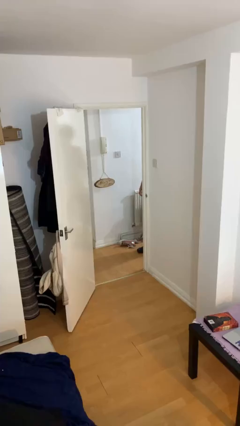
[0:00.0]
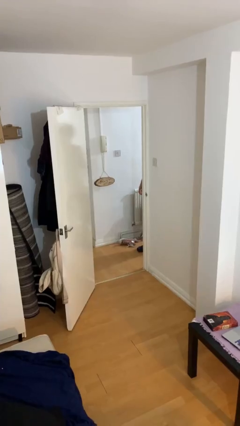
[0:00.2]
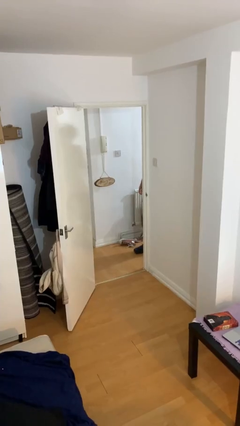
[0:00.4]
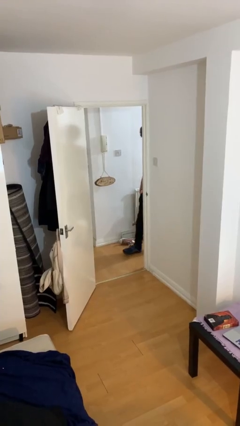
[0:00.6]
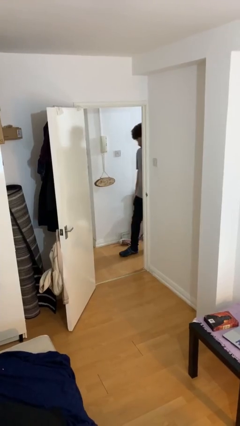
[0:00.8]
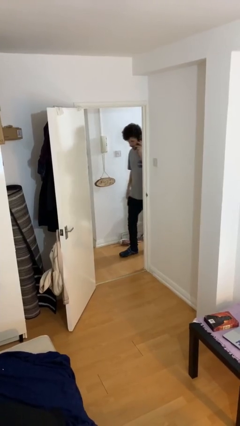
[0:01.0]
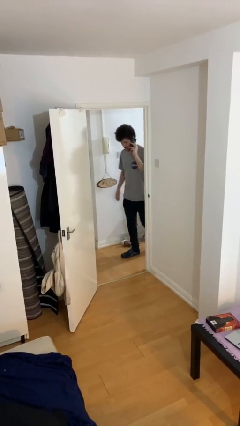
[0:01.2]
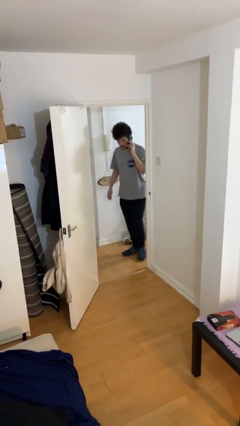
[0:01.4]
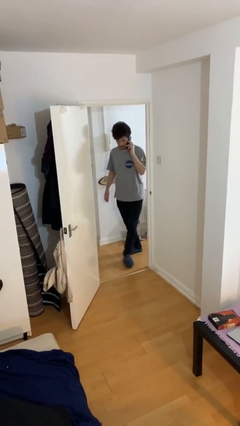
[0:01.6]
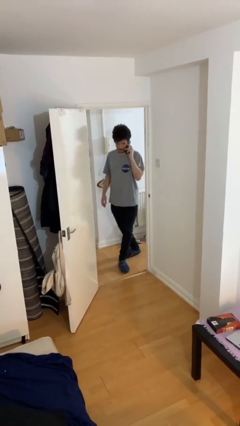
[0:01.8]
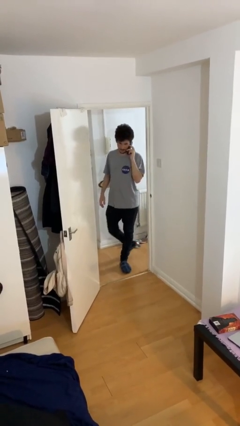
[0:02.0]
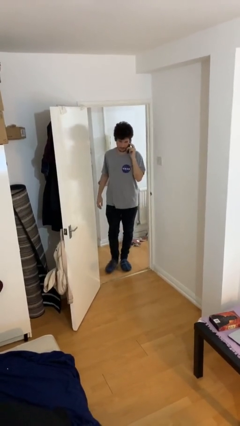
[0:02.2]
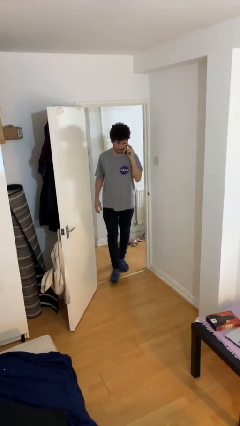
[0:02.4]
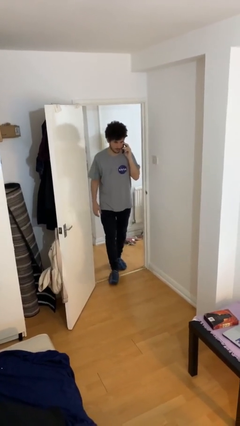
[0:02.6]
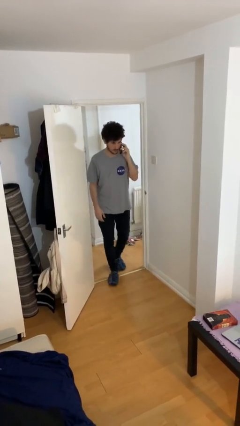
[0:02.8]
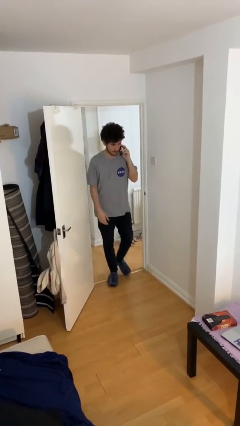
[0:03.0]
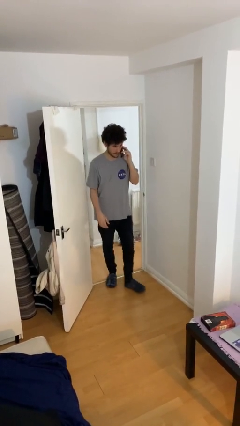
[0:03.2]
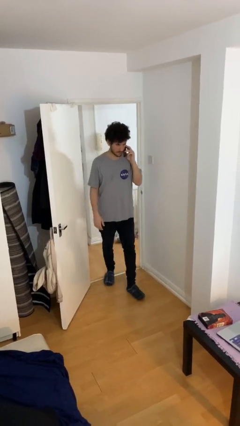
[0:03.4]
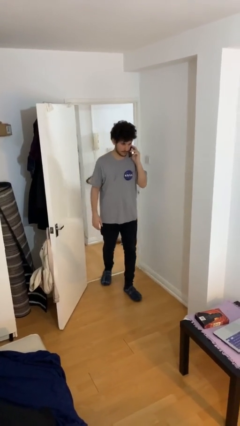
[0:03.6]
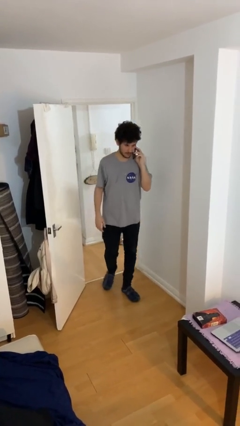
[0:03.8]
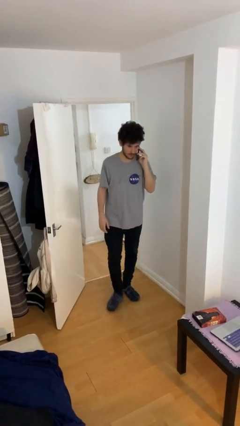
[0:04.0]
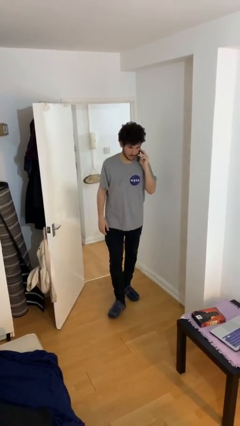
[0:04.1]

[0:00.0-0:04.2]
person enters scene through structure

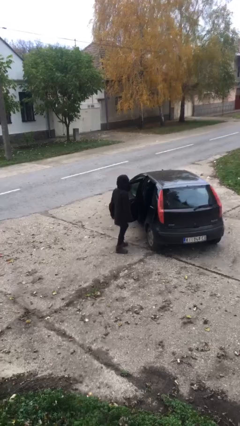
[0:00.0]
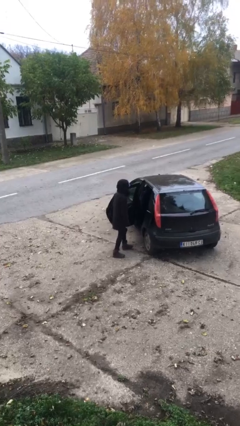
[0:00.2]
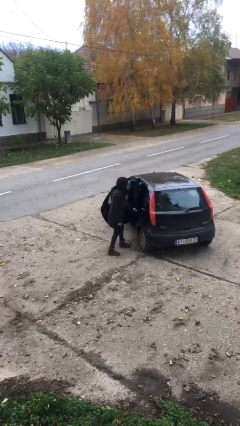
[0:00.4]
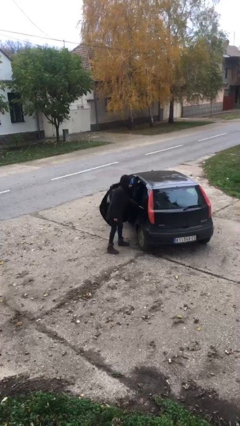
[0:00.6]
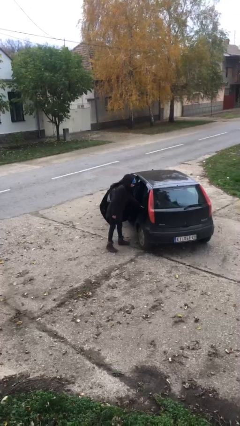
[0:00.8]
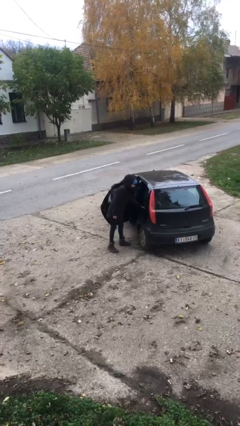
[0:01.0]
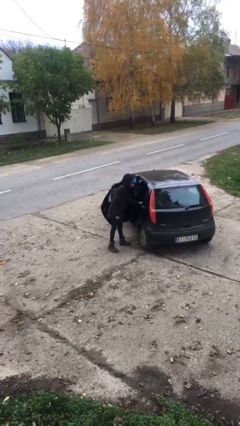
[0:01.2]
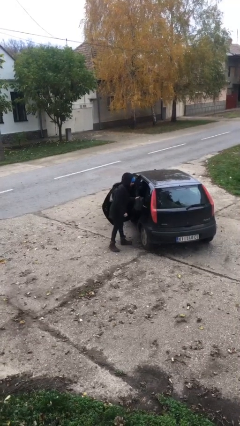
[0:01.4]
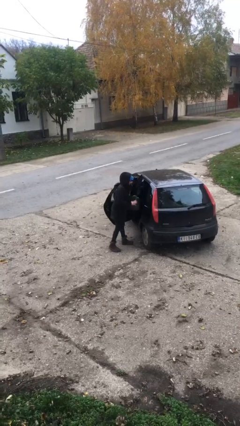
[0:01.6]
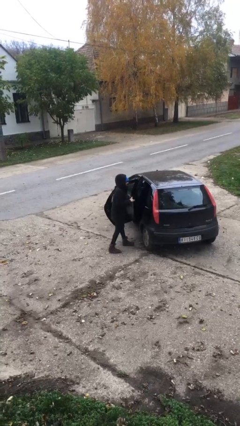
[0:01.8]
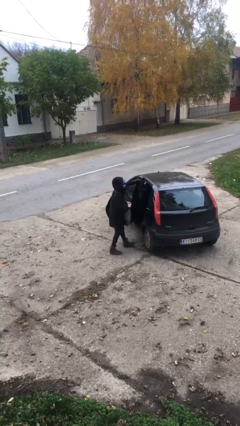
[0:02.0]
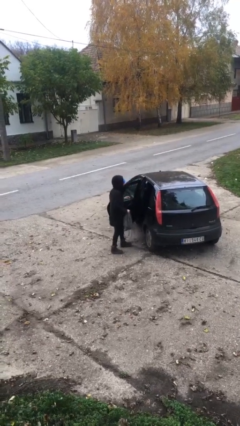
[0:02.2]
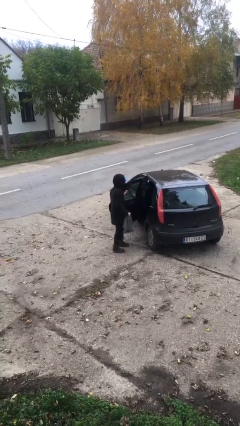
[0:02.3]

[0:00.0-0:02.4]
person unloads car

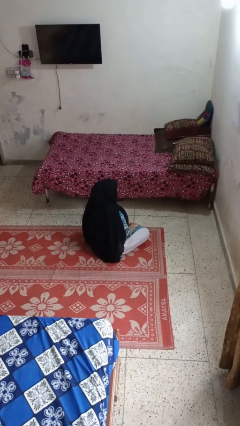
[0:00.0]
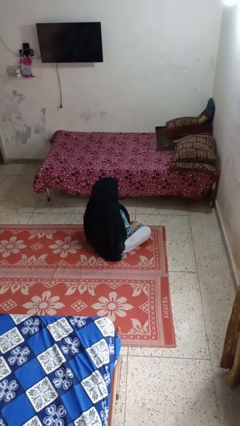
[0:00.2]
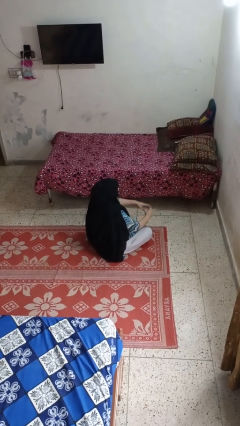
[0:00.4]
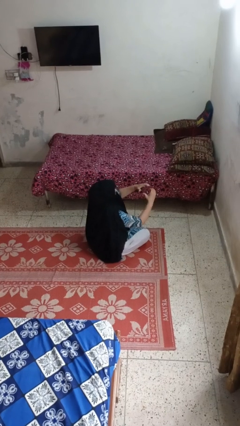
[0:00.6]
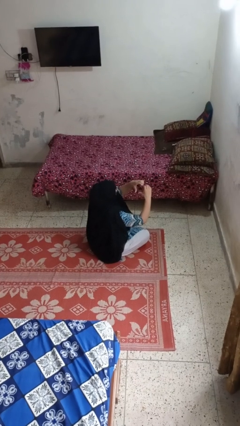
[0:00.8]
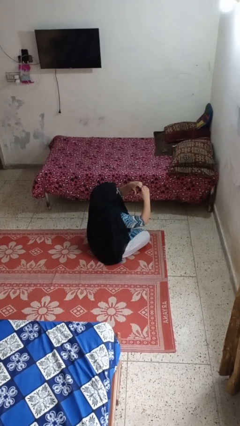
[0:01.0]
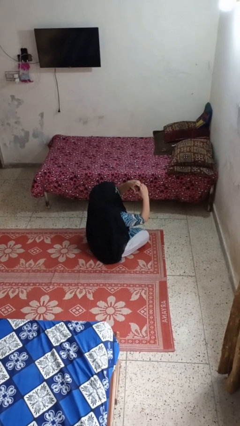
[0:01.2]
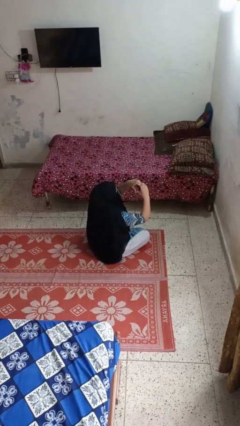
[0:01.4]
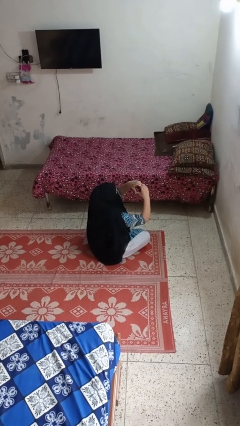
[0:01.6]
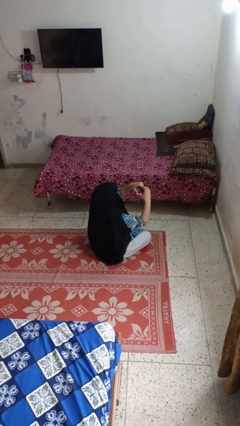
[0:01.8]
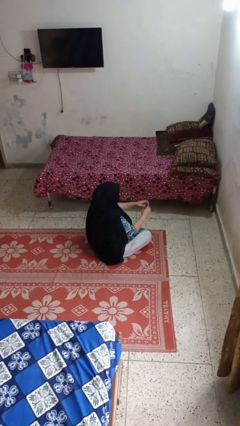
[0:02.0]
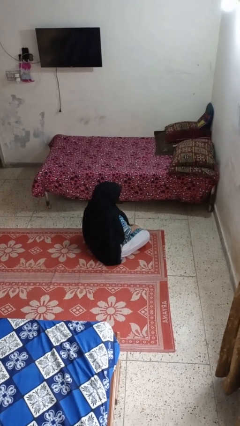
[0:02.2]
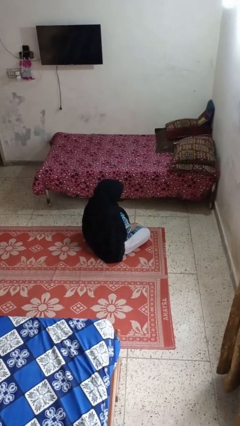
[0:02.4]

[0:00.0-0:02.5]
person gestures heart

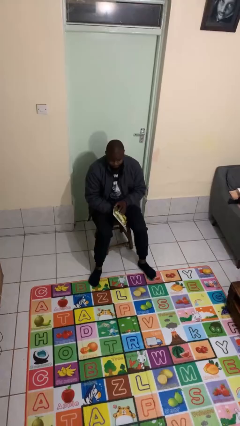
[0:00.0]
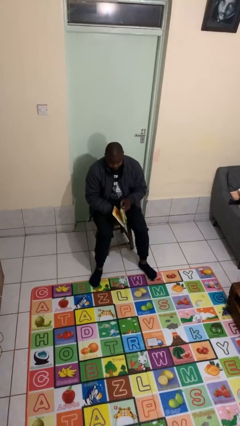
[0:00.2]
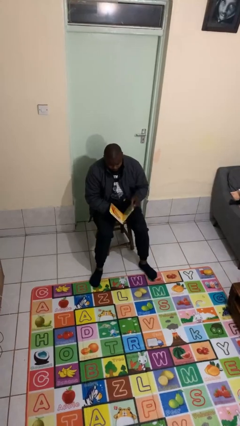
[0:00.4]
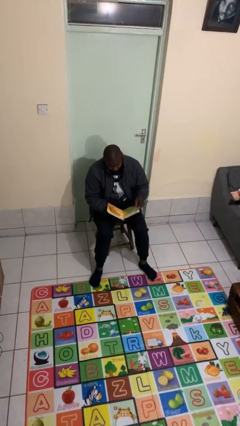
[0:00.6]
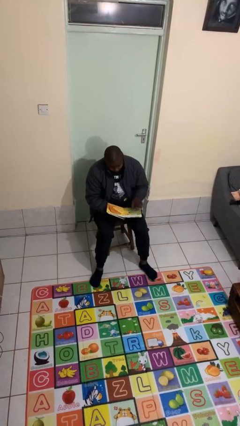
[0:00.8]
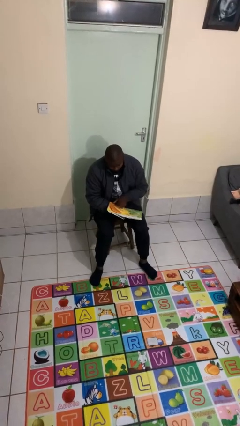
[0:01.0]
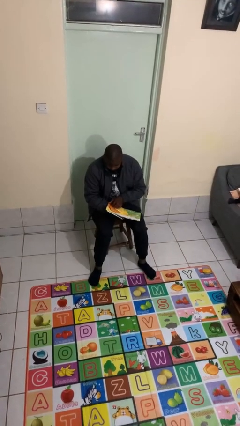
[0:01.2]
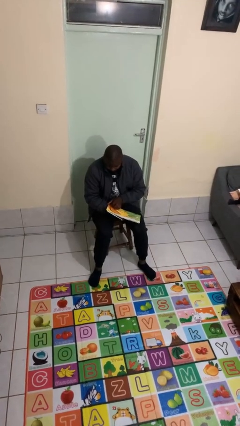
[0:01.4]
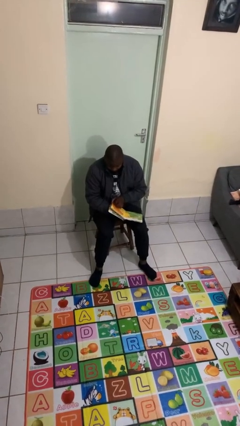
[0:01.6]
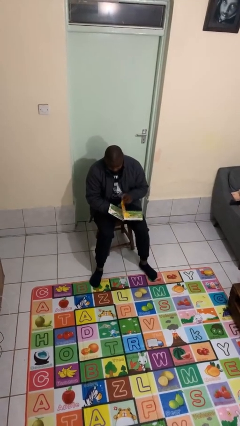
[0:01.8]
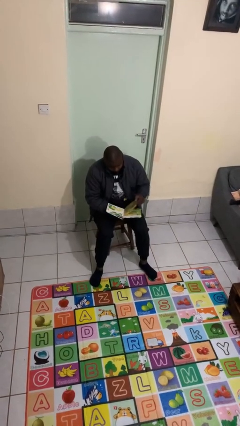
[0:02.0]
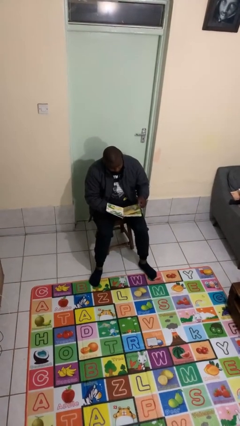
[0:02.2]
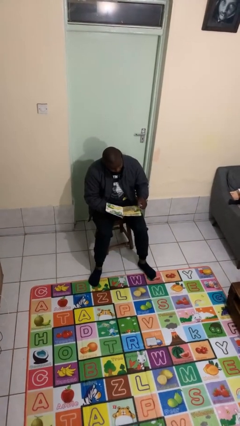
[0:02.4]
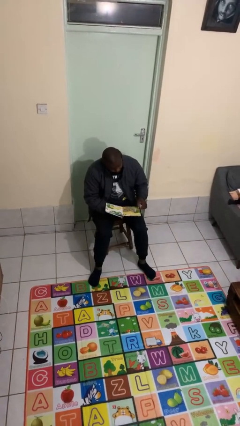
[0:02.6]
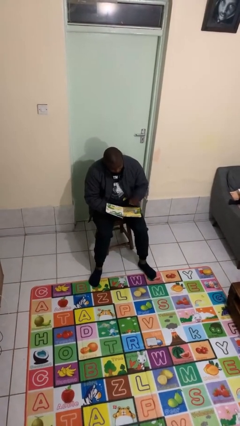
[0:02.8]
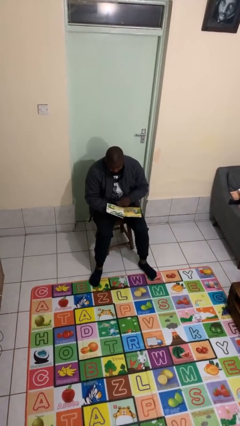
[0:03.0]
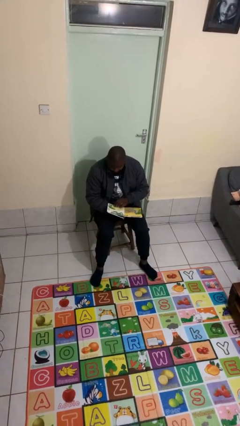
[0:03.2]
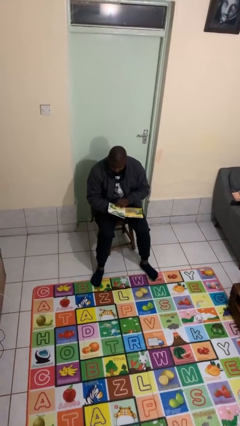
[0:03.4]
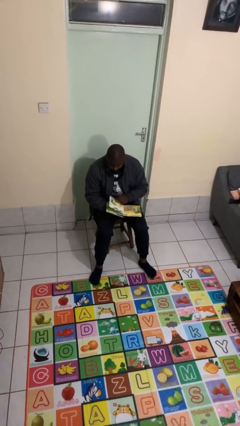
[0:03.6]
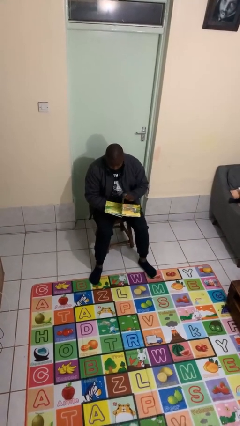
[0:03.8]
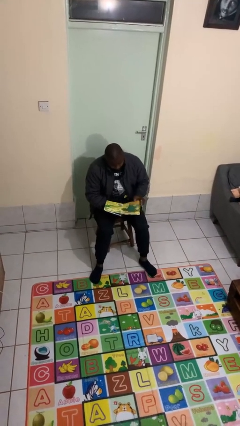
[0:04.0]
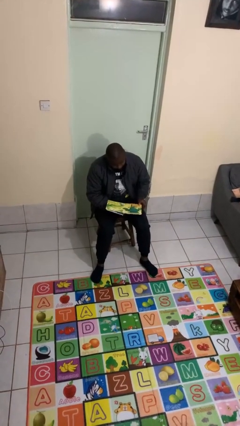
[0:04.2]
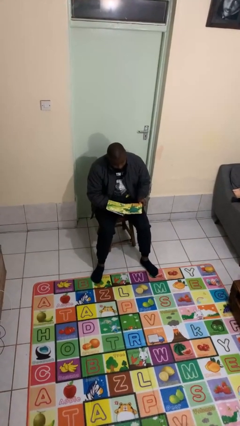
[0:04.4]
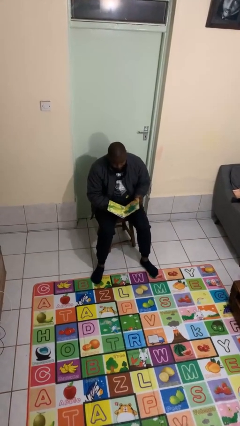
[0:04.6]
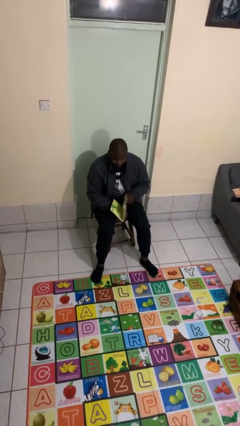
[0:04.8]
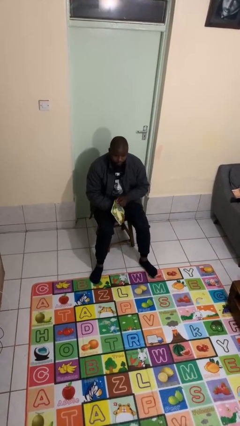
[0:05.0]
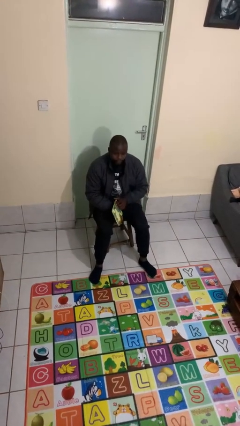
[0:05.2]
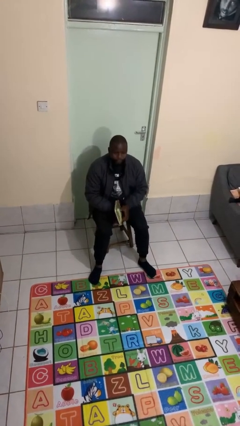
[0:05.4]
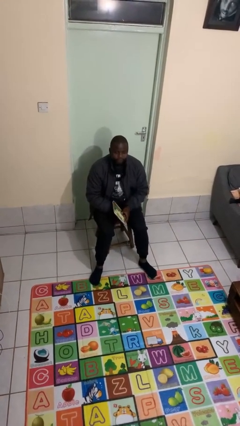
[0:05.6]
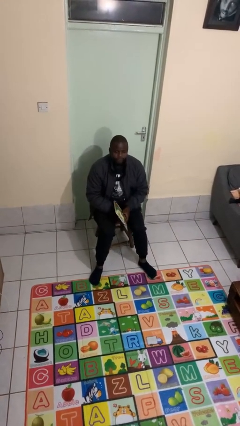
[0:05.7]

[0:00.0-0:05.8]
person reads book

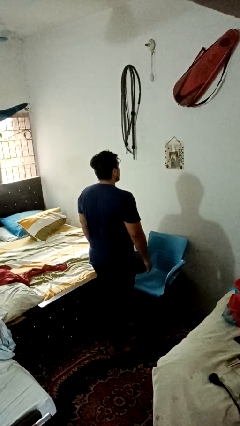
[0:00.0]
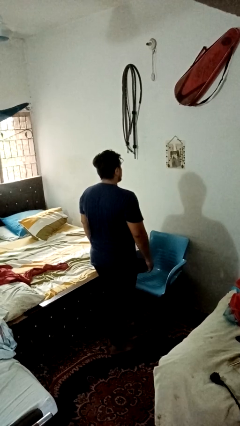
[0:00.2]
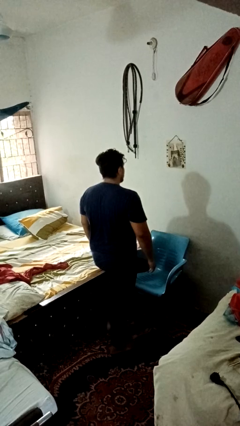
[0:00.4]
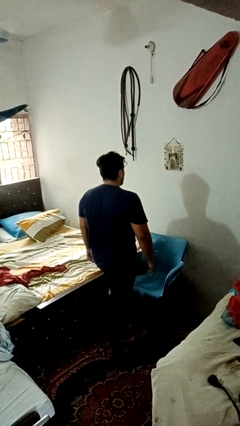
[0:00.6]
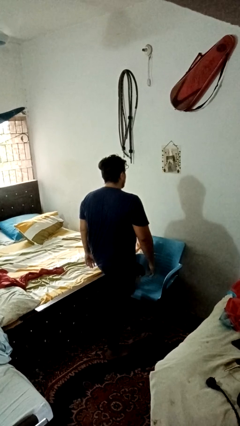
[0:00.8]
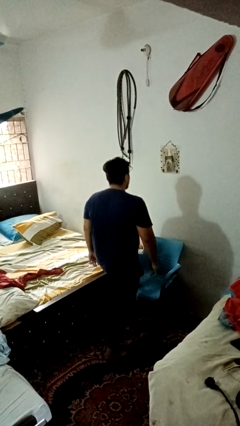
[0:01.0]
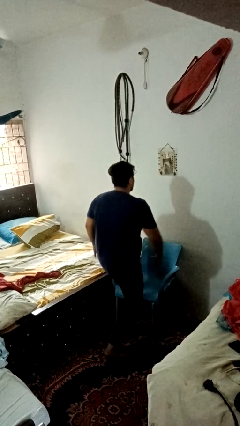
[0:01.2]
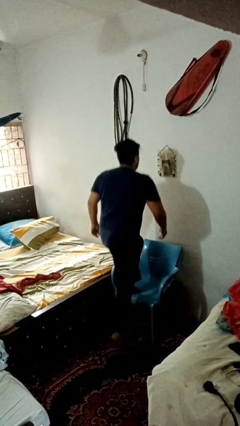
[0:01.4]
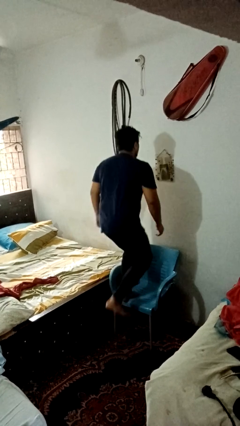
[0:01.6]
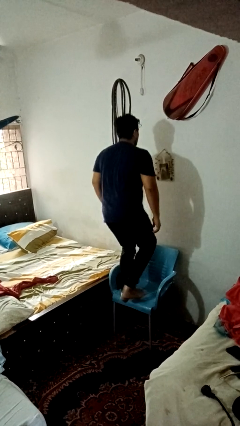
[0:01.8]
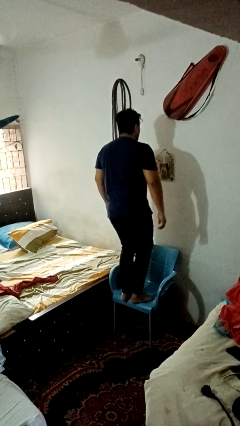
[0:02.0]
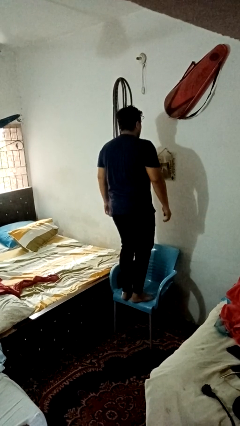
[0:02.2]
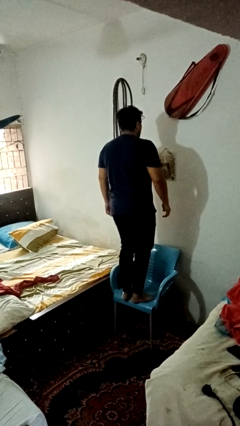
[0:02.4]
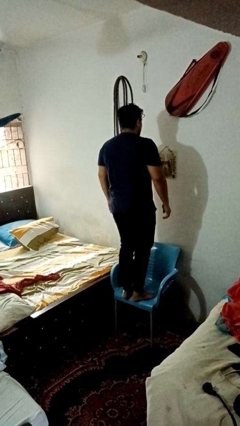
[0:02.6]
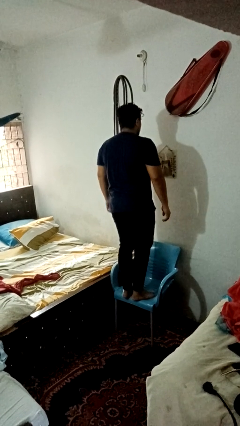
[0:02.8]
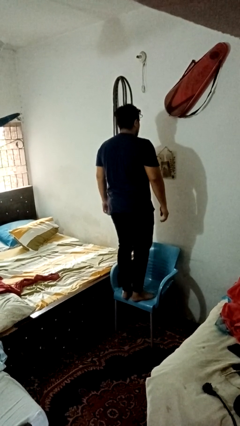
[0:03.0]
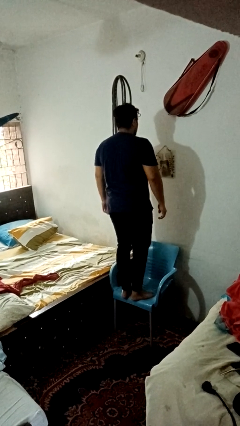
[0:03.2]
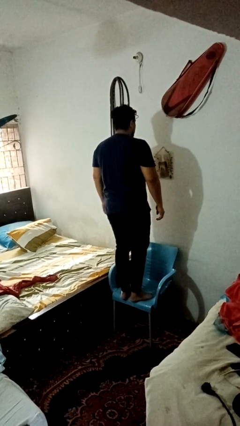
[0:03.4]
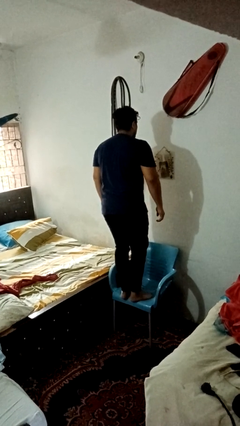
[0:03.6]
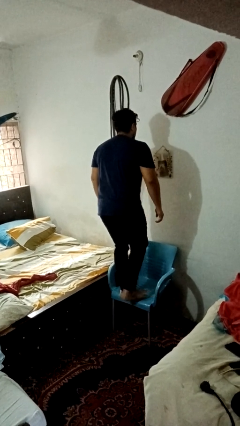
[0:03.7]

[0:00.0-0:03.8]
person climbs on chair
